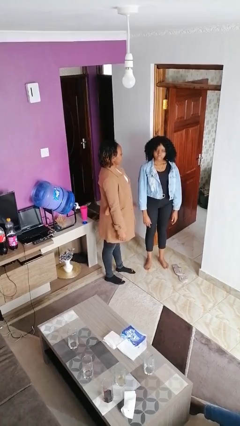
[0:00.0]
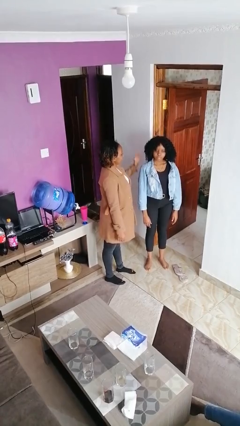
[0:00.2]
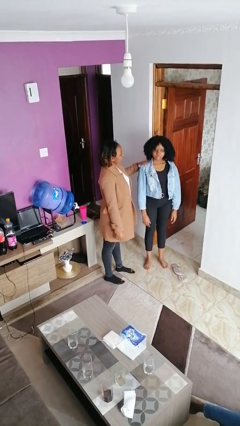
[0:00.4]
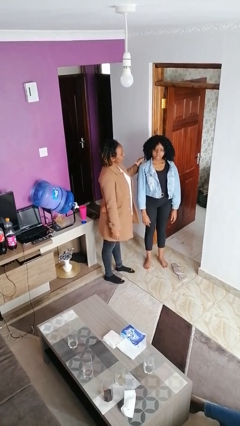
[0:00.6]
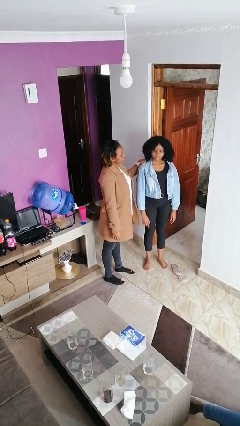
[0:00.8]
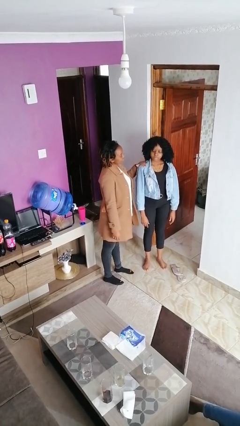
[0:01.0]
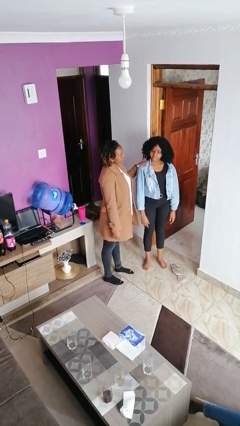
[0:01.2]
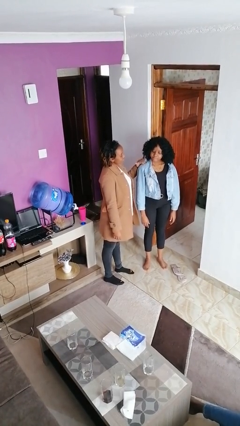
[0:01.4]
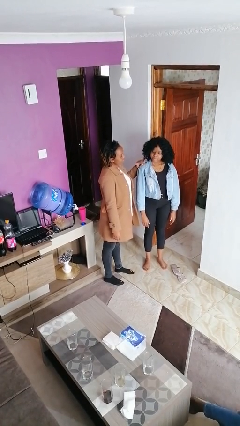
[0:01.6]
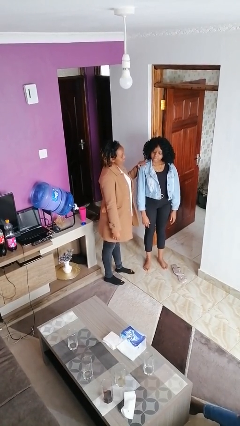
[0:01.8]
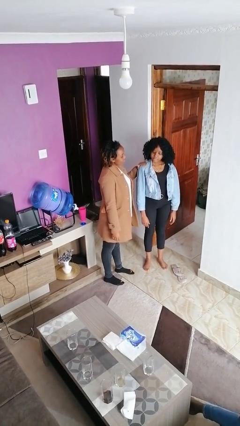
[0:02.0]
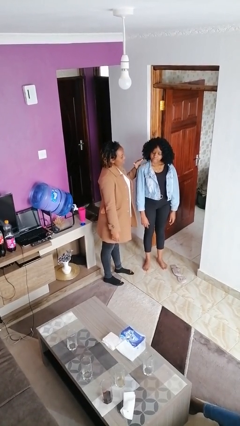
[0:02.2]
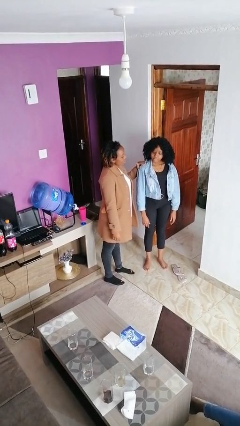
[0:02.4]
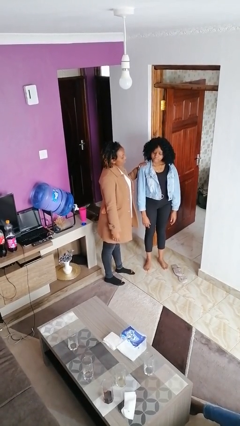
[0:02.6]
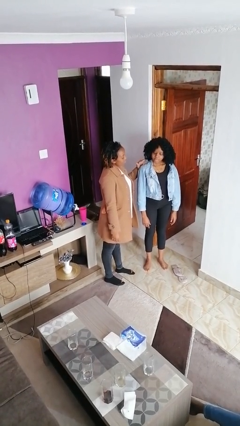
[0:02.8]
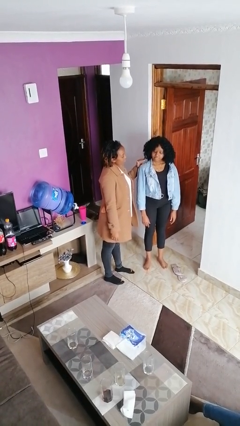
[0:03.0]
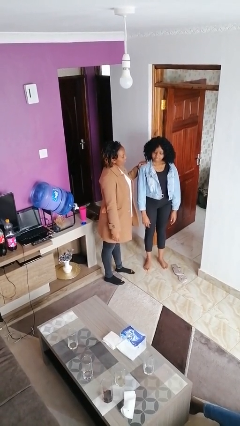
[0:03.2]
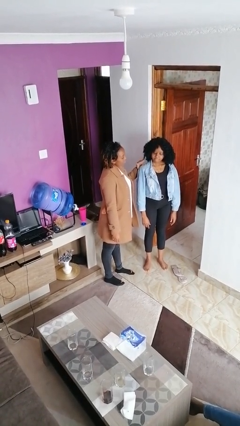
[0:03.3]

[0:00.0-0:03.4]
person pounds shoulders of person

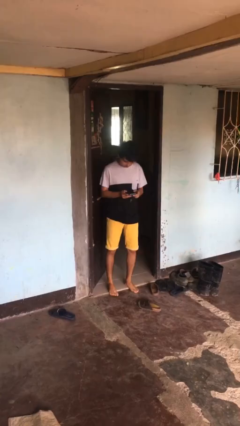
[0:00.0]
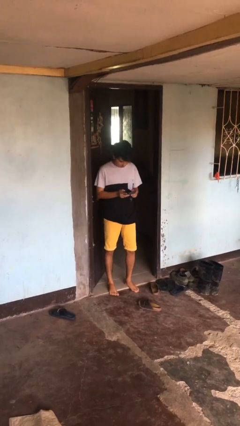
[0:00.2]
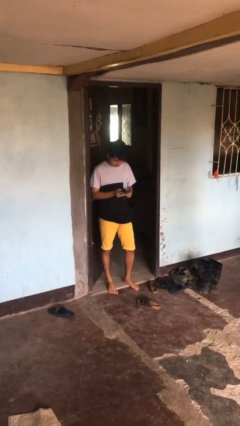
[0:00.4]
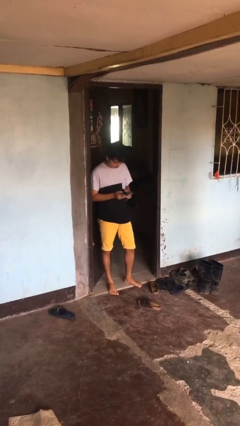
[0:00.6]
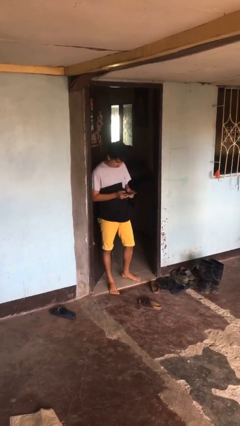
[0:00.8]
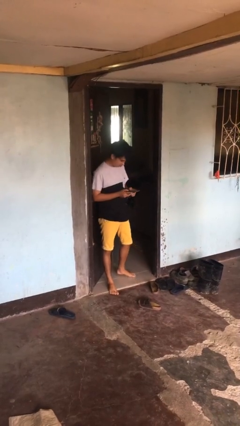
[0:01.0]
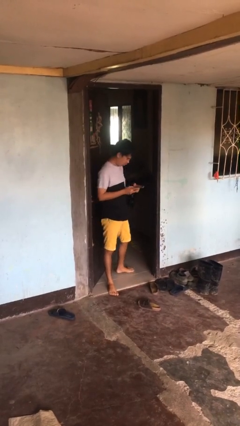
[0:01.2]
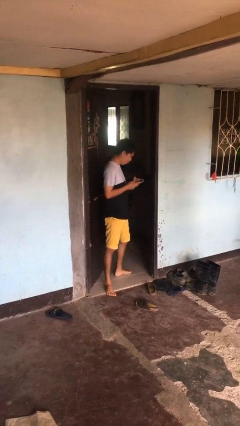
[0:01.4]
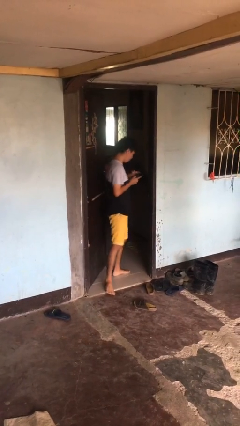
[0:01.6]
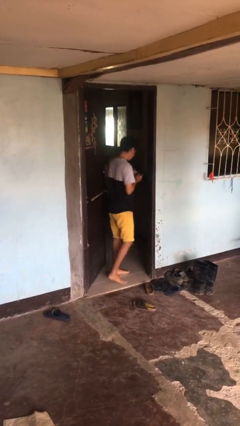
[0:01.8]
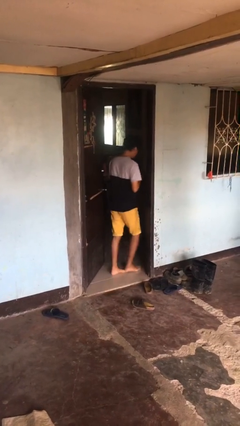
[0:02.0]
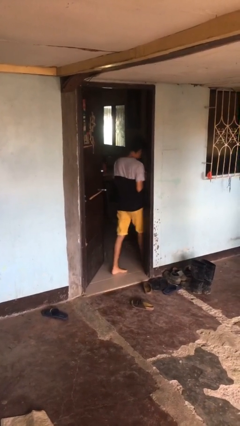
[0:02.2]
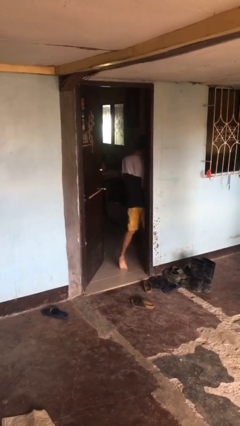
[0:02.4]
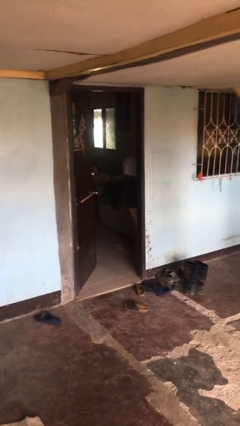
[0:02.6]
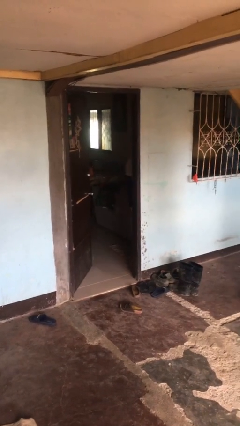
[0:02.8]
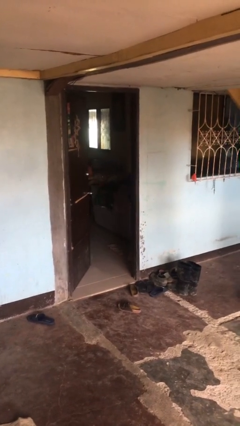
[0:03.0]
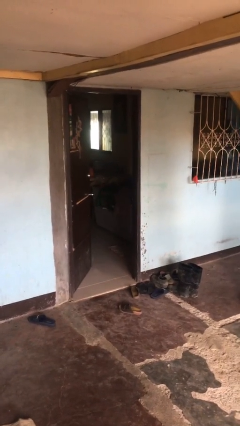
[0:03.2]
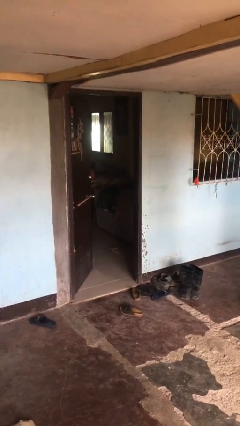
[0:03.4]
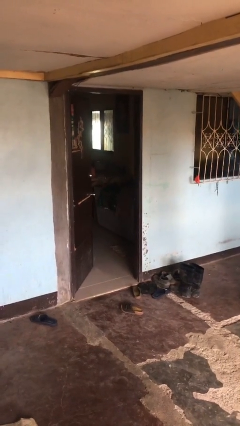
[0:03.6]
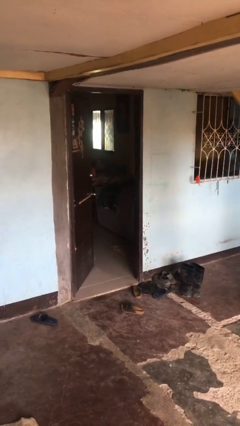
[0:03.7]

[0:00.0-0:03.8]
person exits scene through structure

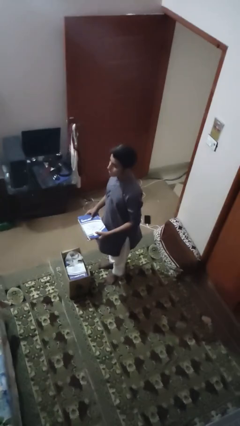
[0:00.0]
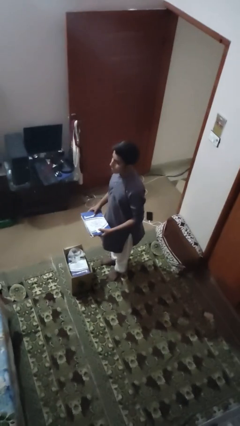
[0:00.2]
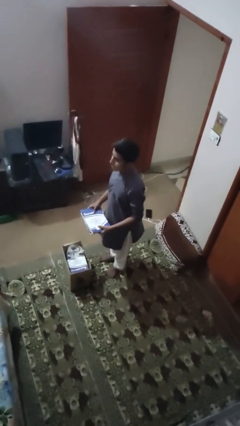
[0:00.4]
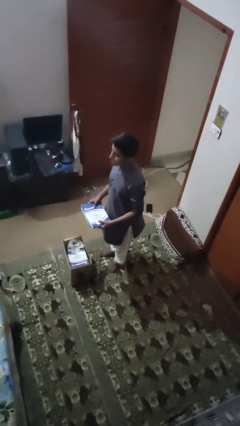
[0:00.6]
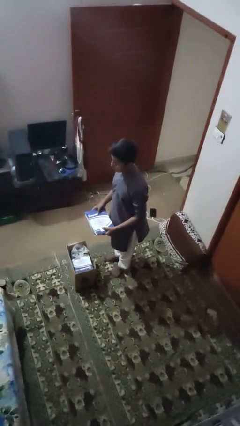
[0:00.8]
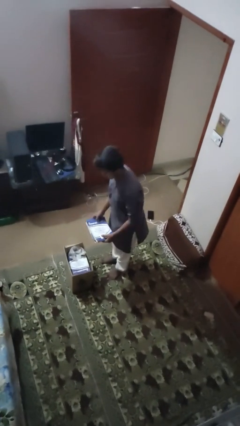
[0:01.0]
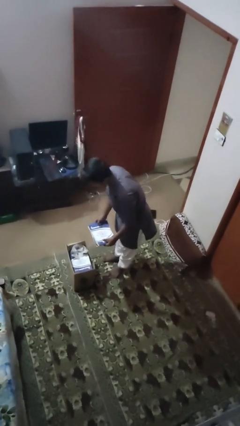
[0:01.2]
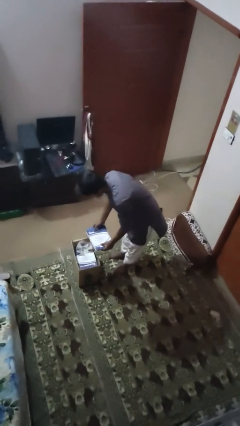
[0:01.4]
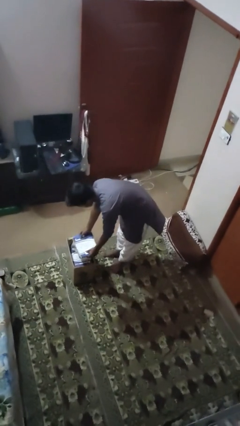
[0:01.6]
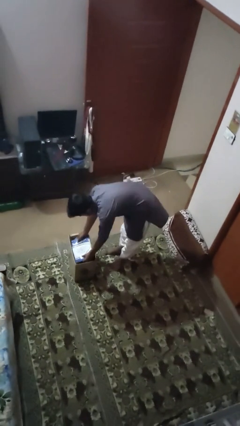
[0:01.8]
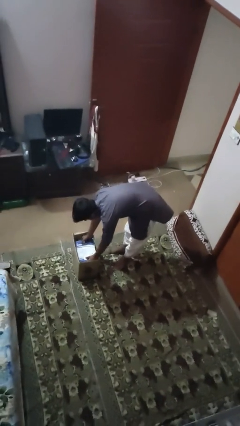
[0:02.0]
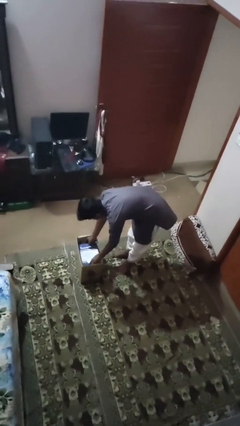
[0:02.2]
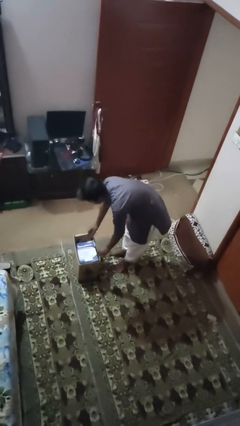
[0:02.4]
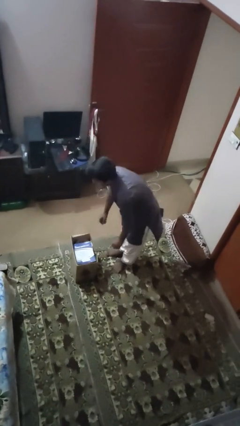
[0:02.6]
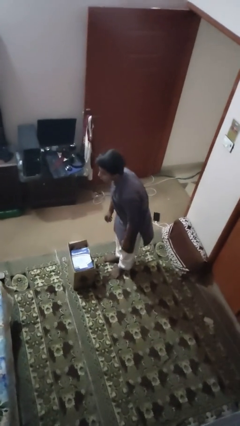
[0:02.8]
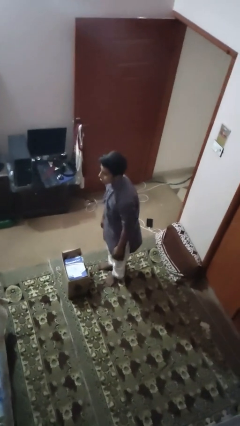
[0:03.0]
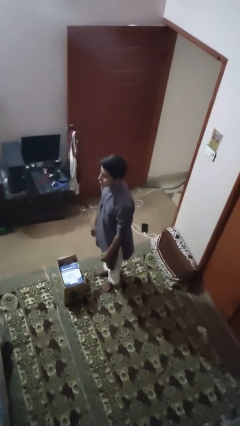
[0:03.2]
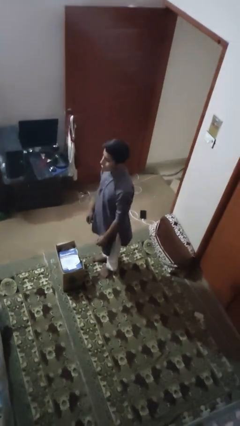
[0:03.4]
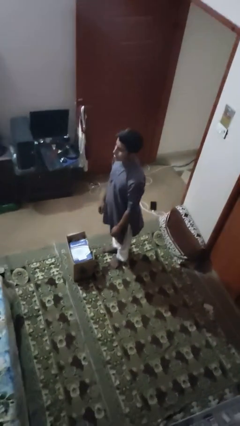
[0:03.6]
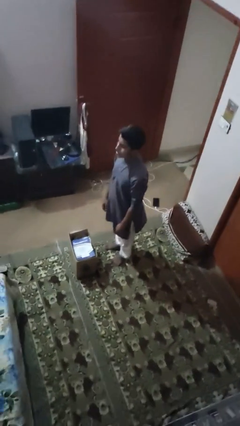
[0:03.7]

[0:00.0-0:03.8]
person puts object into box

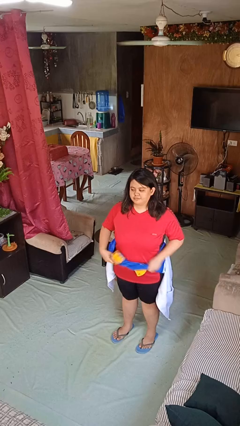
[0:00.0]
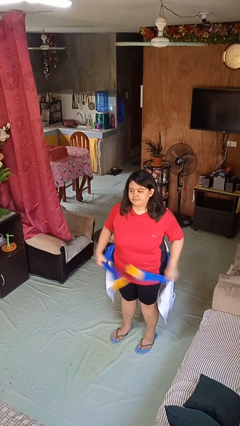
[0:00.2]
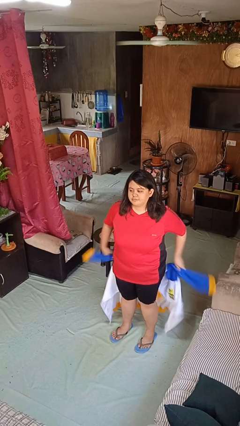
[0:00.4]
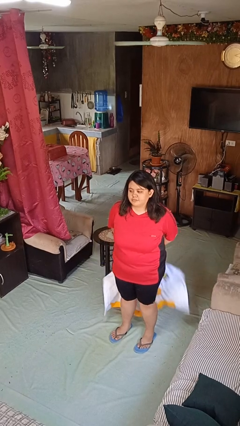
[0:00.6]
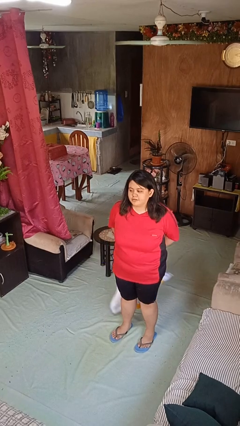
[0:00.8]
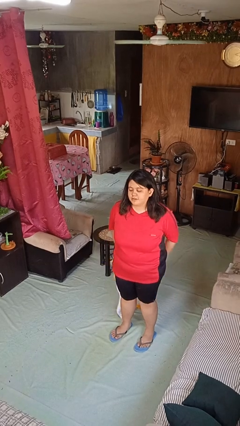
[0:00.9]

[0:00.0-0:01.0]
person unties jacket around waist

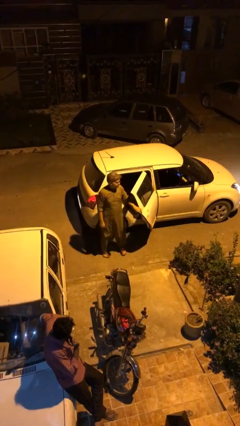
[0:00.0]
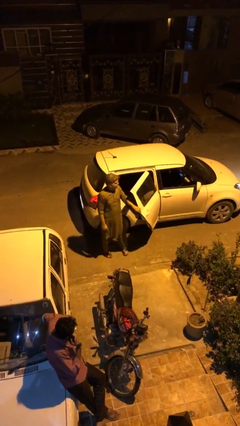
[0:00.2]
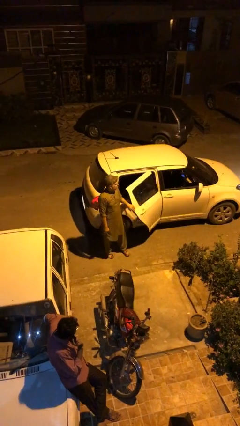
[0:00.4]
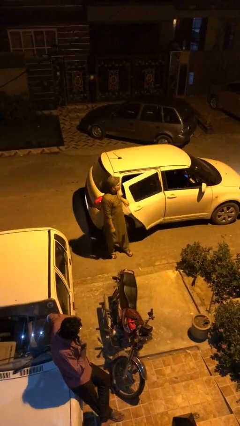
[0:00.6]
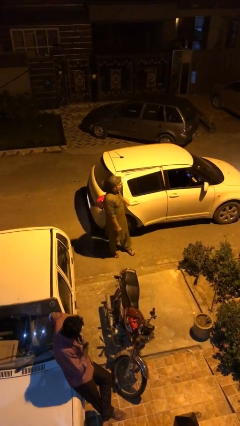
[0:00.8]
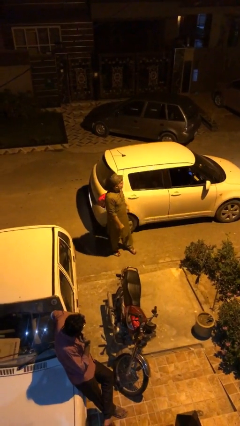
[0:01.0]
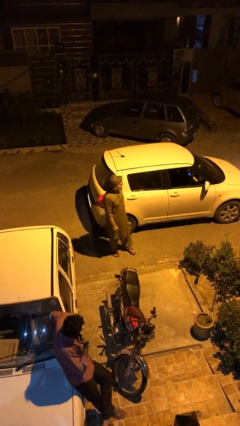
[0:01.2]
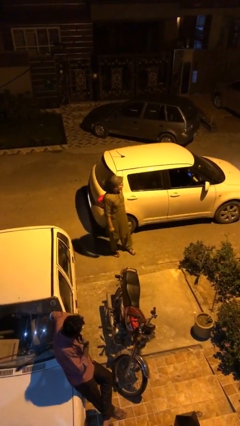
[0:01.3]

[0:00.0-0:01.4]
person closes car door

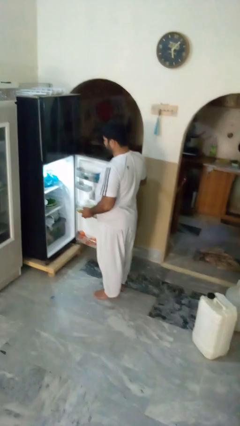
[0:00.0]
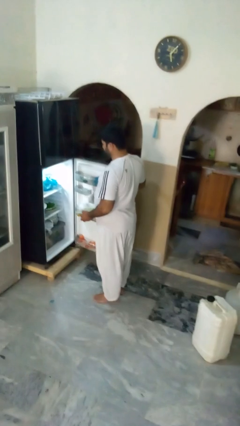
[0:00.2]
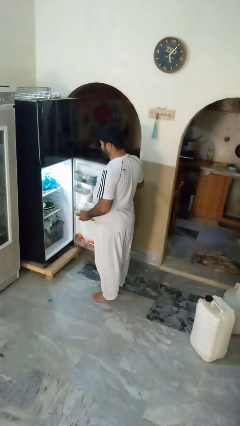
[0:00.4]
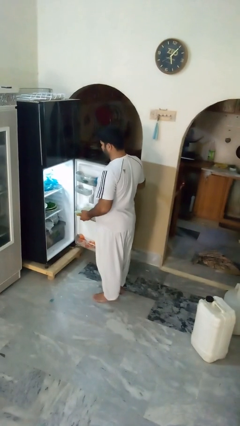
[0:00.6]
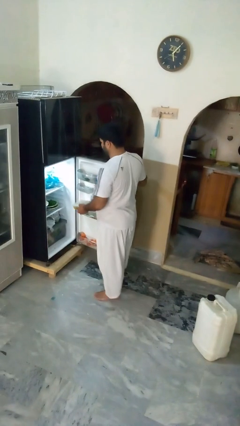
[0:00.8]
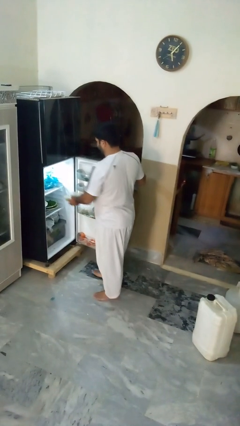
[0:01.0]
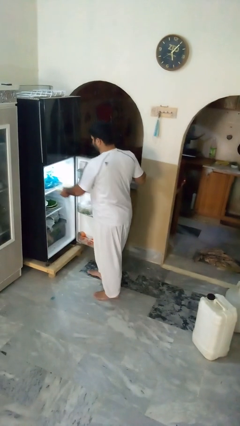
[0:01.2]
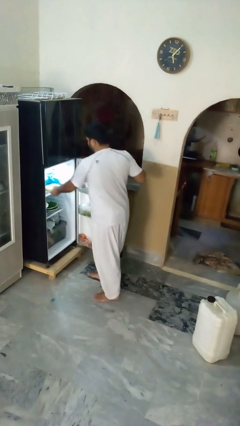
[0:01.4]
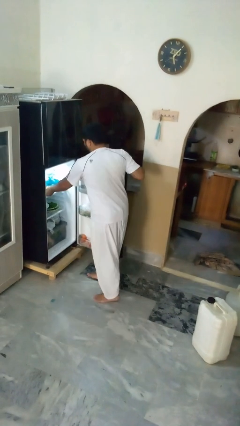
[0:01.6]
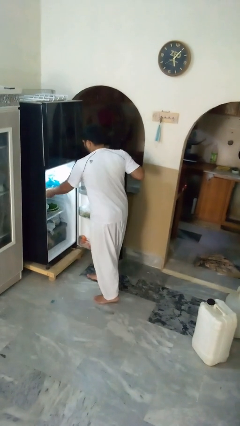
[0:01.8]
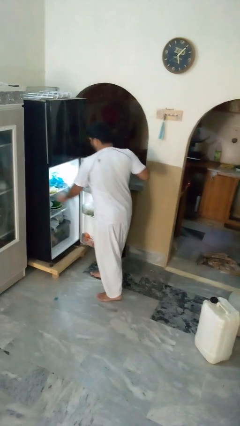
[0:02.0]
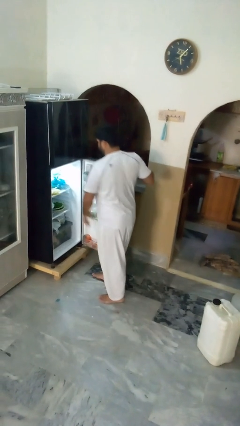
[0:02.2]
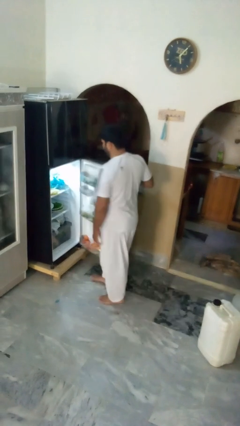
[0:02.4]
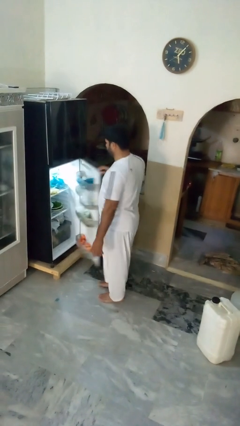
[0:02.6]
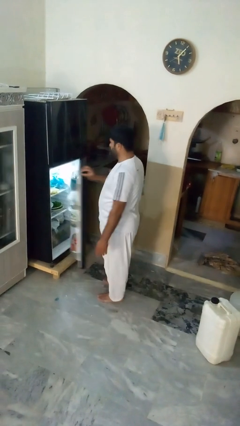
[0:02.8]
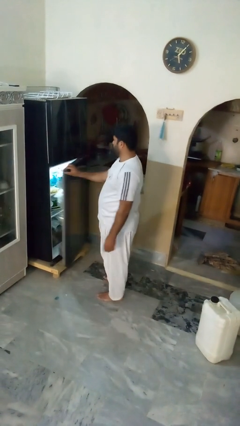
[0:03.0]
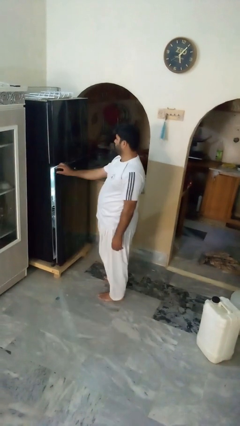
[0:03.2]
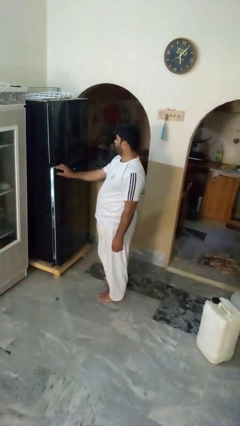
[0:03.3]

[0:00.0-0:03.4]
person puts object into refrigerator

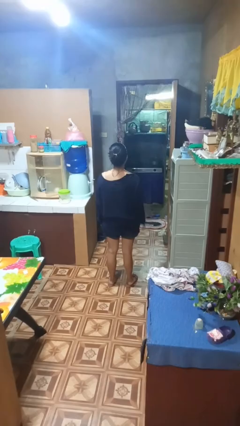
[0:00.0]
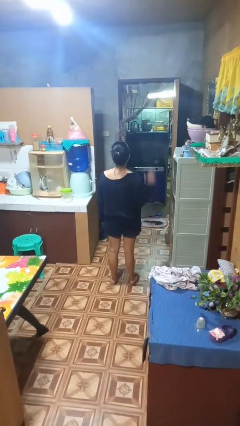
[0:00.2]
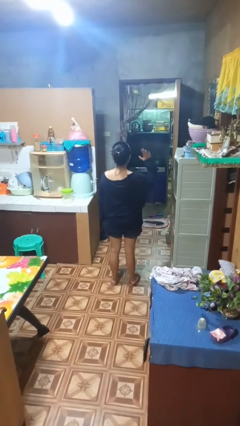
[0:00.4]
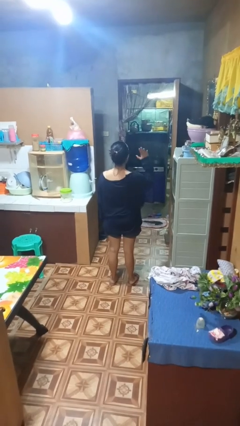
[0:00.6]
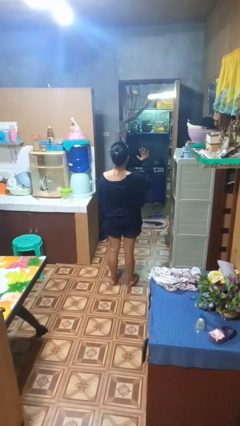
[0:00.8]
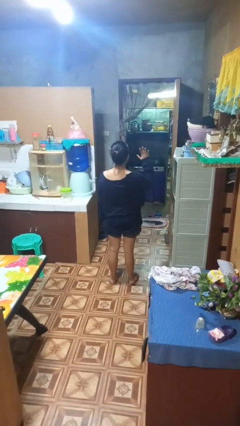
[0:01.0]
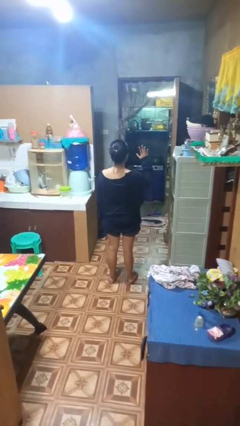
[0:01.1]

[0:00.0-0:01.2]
person gestures number five
